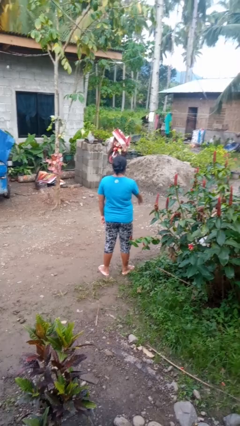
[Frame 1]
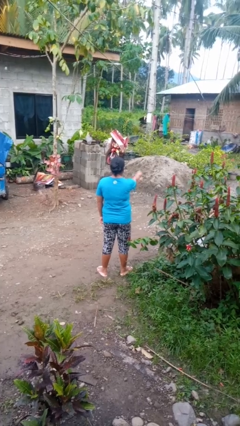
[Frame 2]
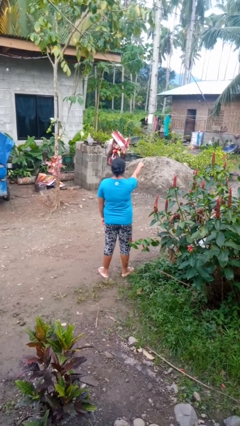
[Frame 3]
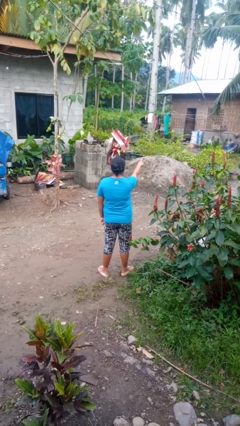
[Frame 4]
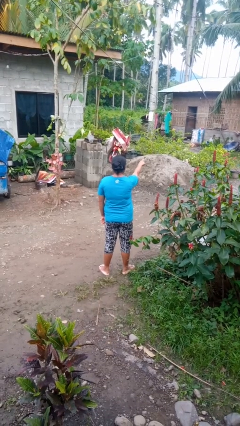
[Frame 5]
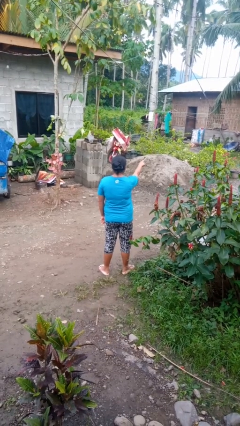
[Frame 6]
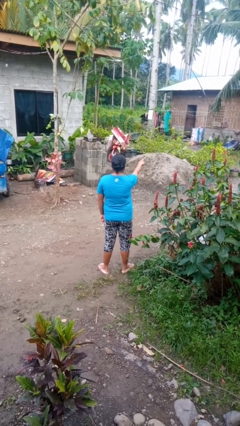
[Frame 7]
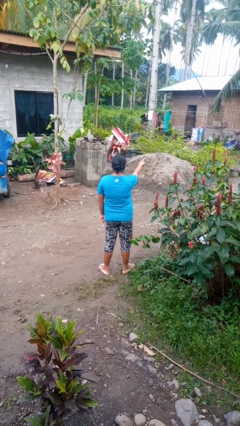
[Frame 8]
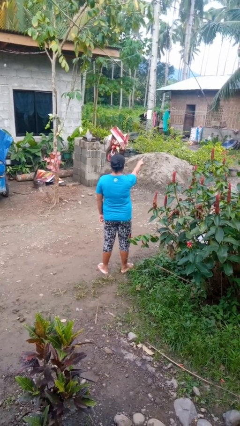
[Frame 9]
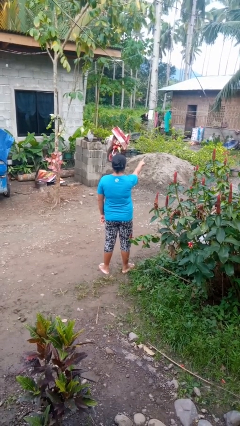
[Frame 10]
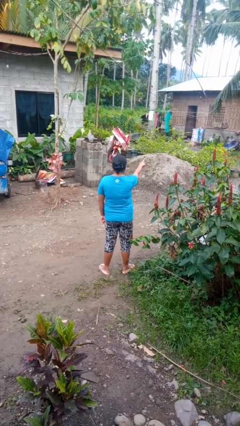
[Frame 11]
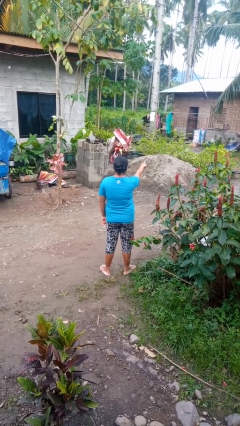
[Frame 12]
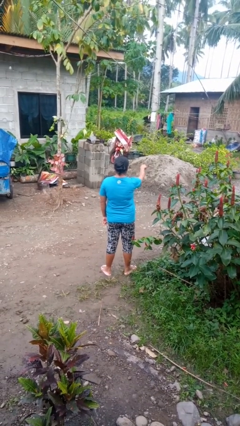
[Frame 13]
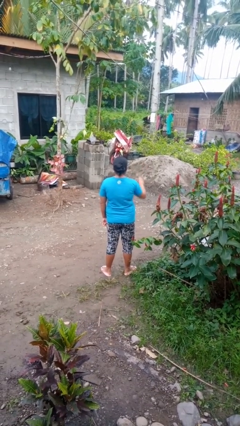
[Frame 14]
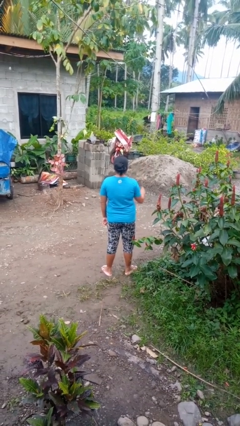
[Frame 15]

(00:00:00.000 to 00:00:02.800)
person points at person

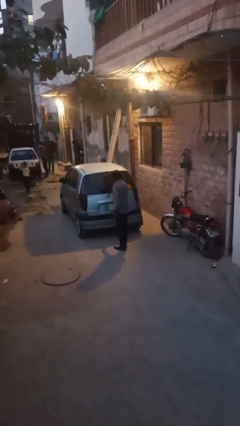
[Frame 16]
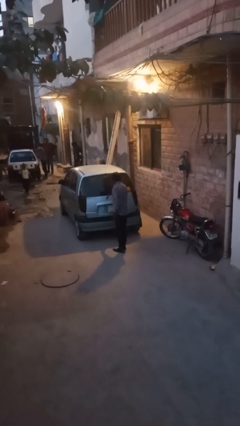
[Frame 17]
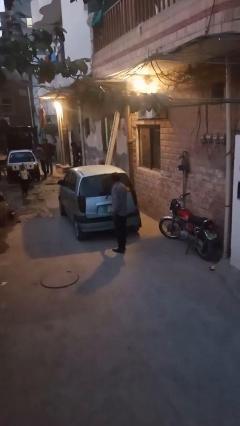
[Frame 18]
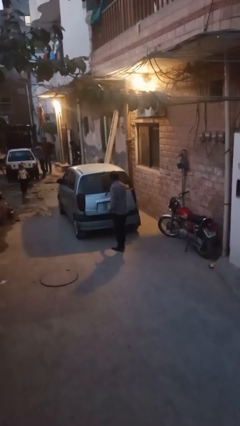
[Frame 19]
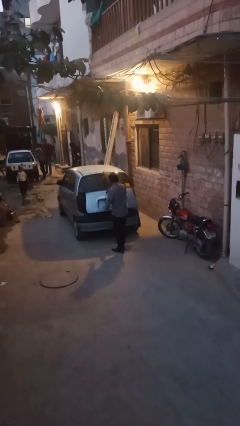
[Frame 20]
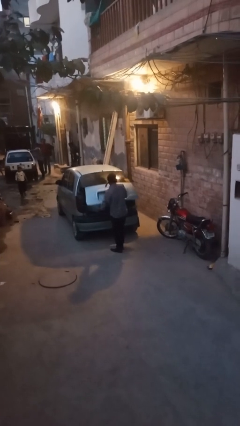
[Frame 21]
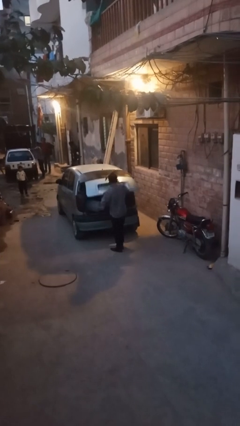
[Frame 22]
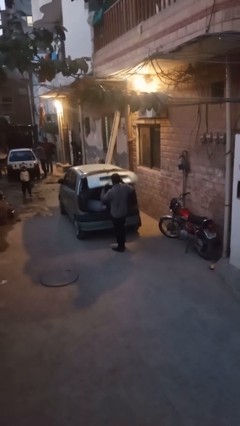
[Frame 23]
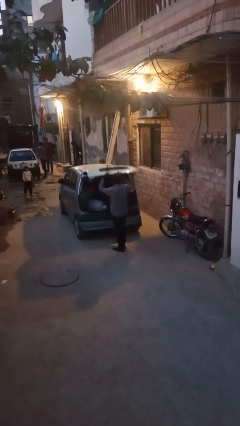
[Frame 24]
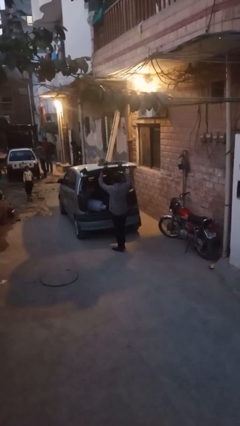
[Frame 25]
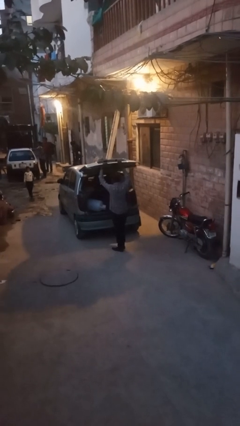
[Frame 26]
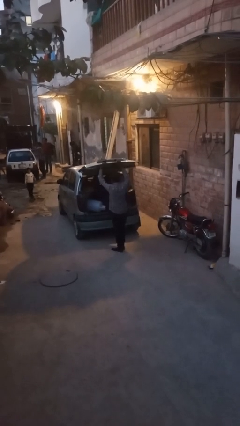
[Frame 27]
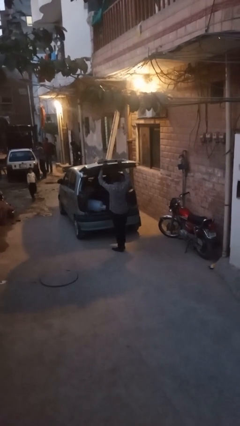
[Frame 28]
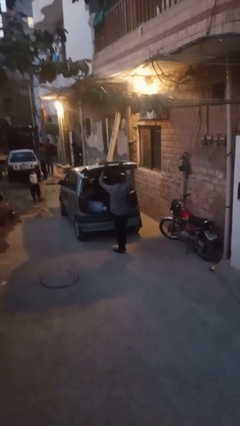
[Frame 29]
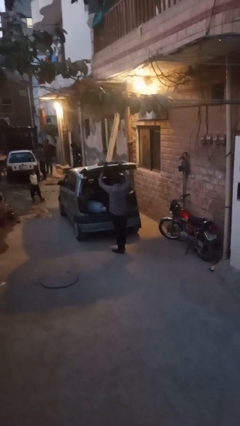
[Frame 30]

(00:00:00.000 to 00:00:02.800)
person opens car trunk

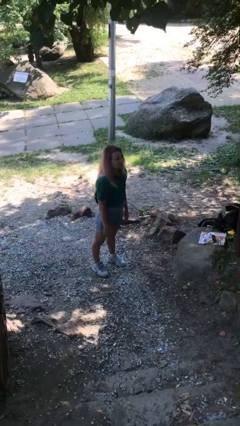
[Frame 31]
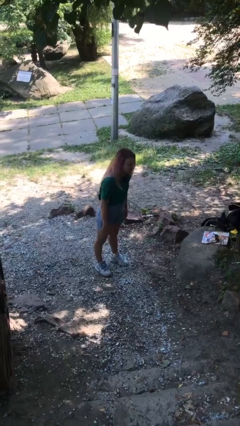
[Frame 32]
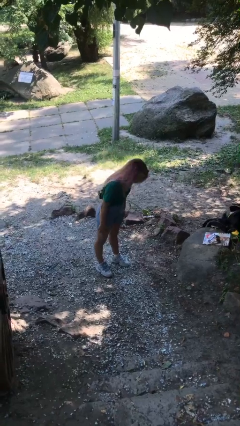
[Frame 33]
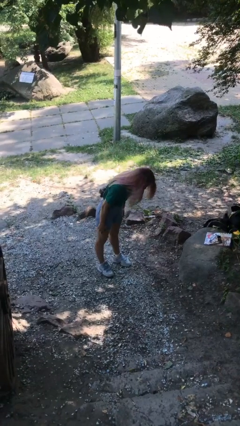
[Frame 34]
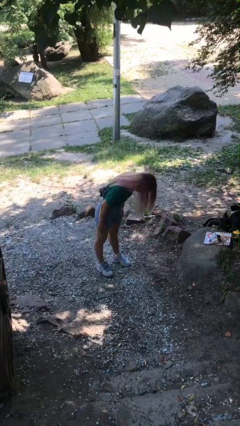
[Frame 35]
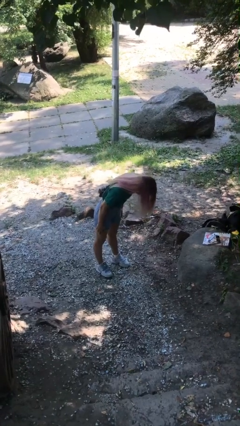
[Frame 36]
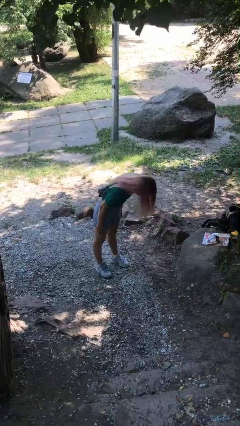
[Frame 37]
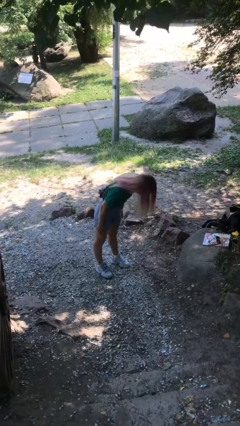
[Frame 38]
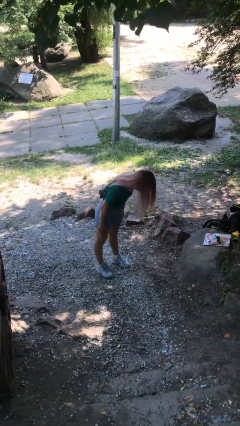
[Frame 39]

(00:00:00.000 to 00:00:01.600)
person bows

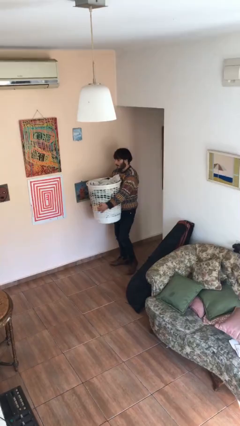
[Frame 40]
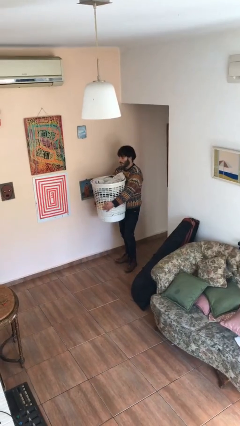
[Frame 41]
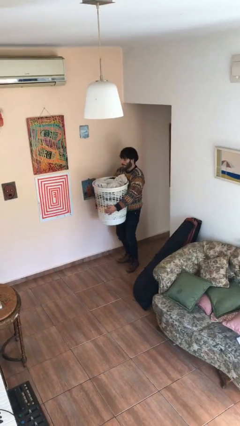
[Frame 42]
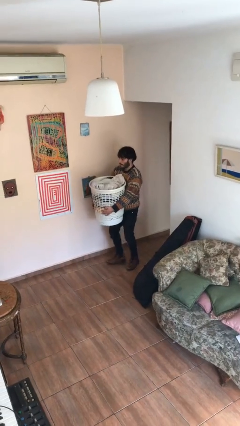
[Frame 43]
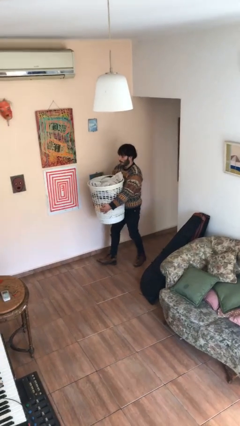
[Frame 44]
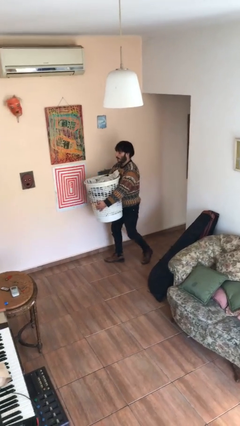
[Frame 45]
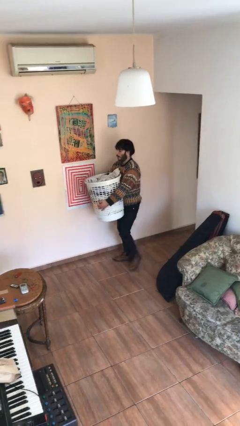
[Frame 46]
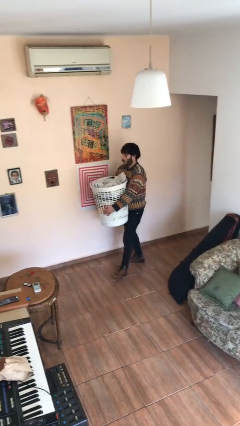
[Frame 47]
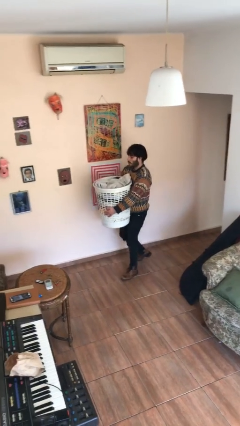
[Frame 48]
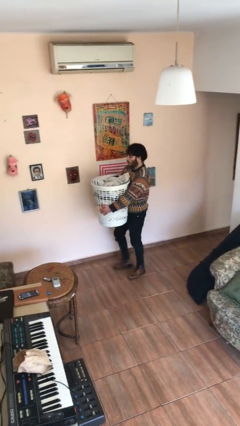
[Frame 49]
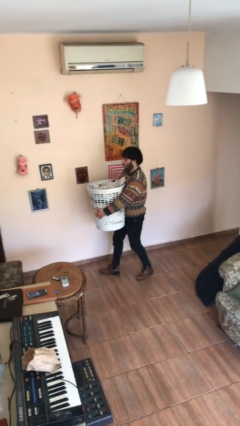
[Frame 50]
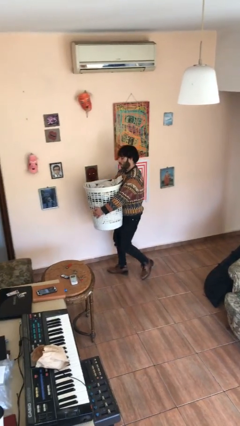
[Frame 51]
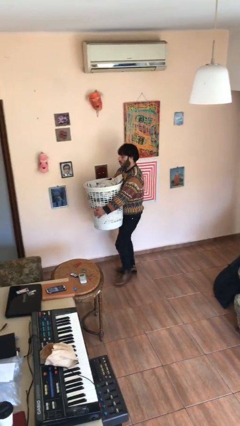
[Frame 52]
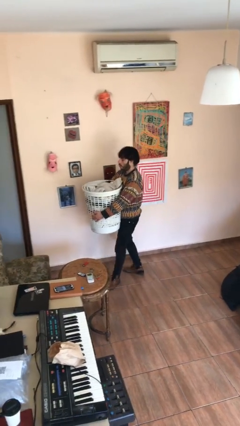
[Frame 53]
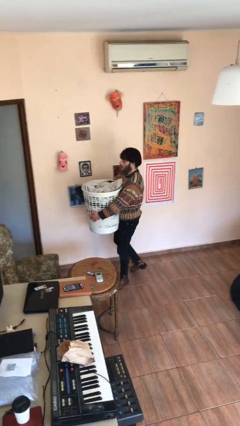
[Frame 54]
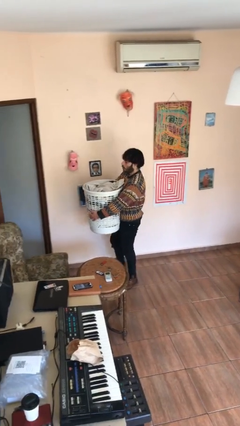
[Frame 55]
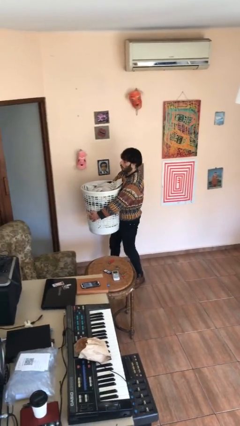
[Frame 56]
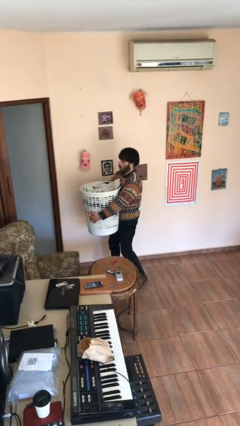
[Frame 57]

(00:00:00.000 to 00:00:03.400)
person carries laundry basket

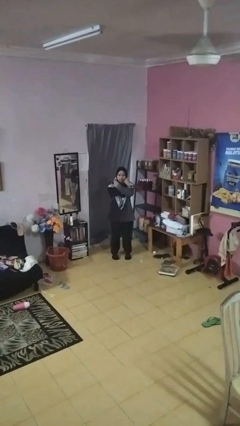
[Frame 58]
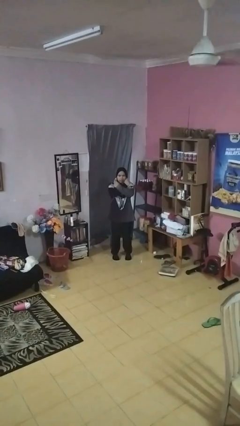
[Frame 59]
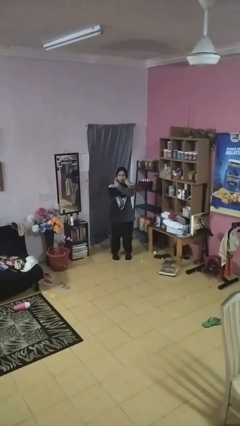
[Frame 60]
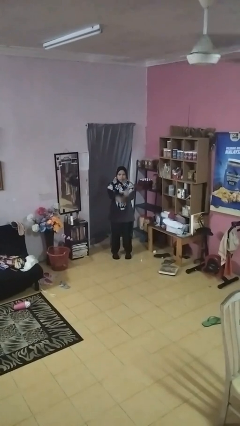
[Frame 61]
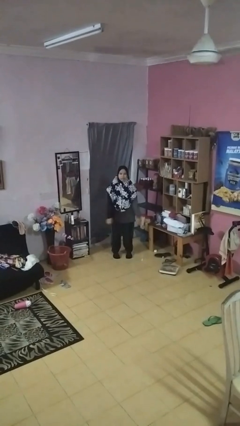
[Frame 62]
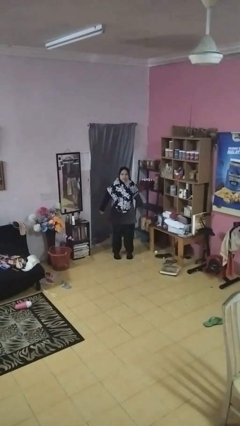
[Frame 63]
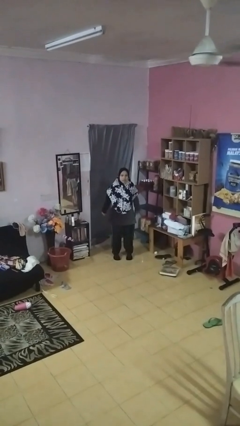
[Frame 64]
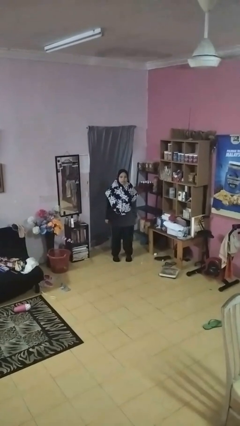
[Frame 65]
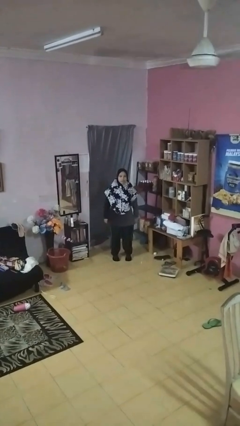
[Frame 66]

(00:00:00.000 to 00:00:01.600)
person crosses arms

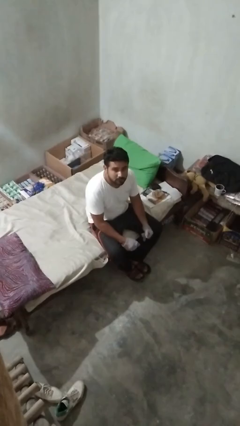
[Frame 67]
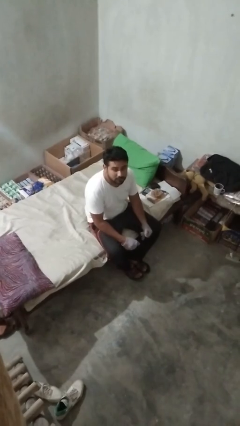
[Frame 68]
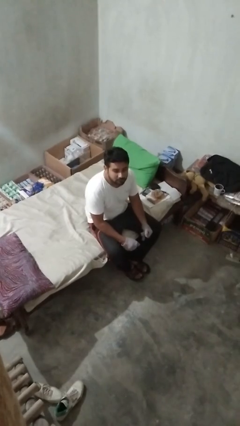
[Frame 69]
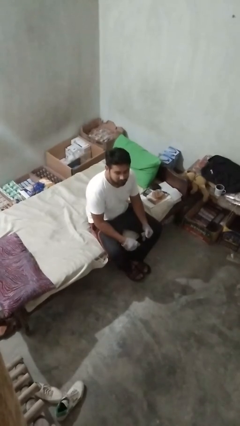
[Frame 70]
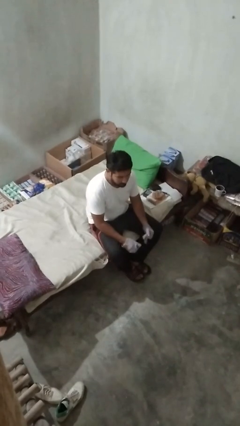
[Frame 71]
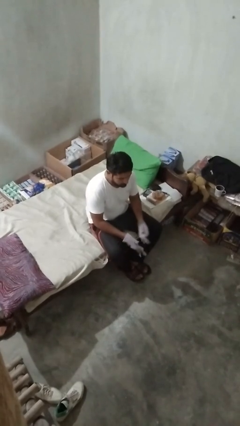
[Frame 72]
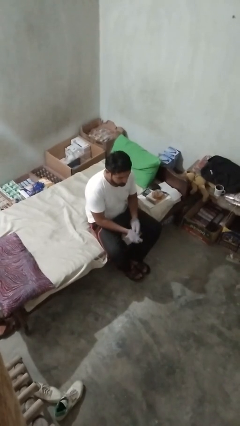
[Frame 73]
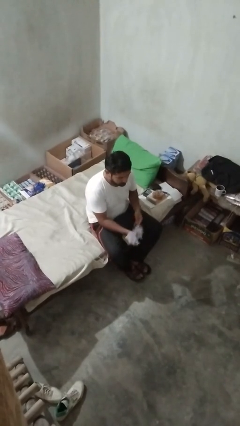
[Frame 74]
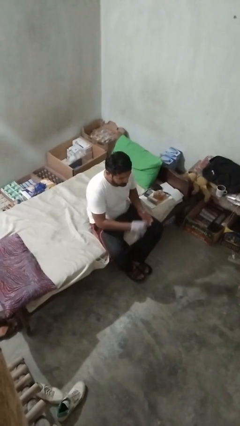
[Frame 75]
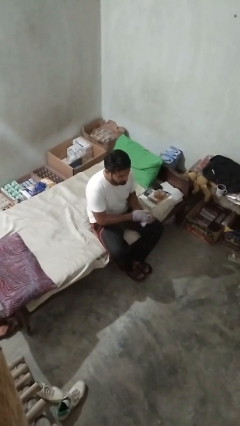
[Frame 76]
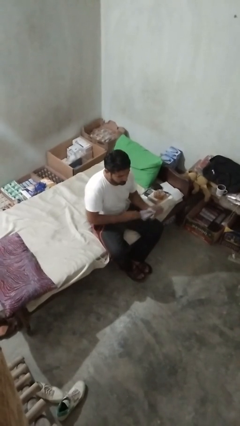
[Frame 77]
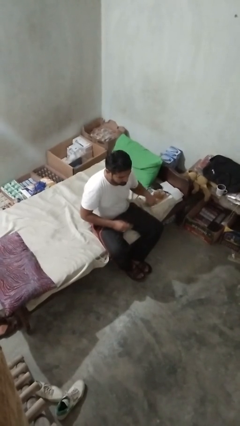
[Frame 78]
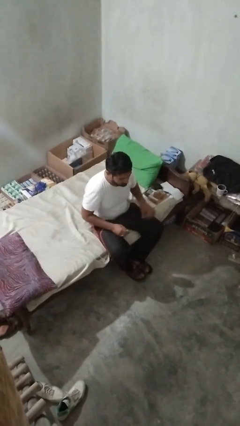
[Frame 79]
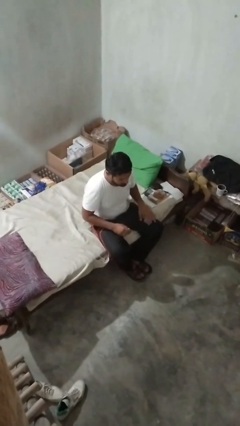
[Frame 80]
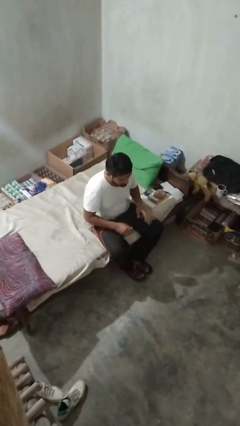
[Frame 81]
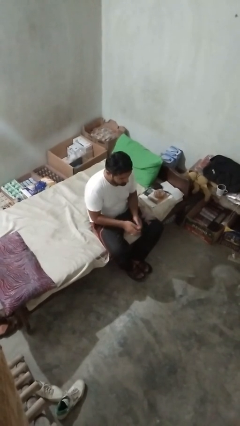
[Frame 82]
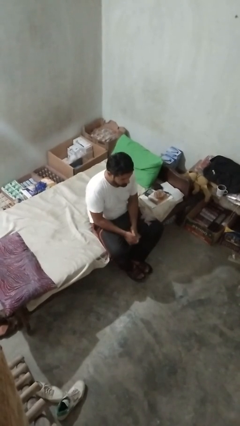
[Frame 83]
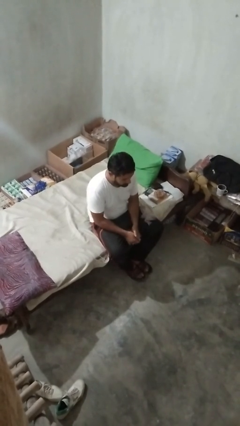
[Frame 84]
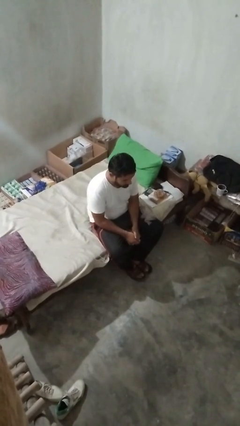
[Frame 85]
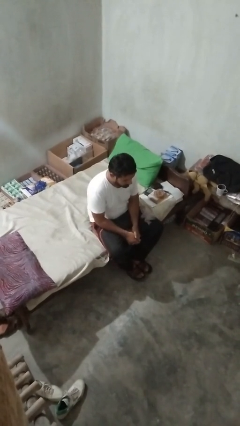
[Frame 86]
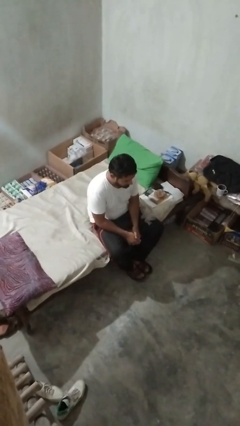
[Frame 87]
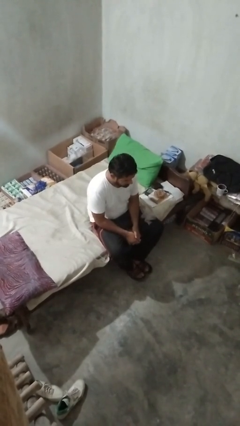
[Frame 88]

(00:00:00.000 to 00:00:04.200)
person takes off gloves

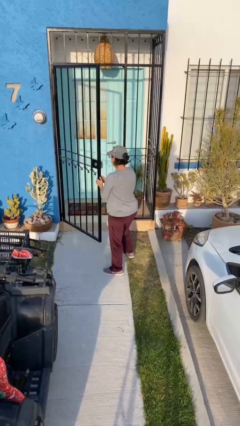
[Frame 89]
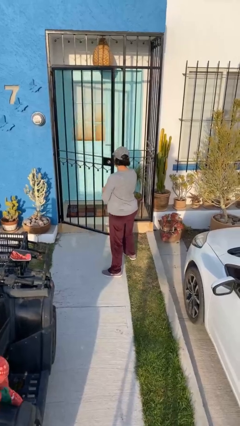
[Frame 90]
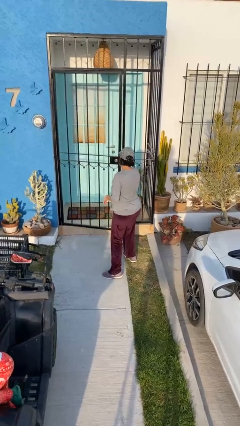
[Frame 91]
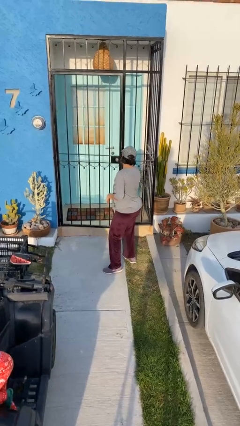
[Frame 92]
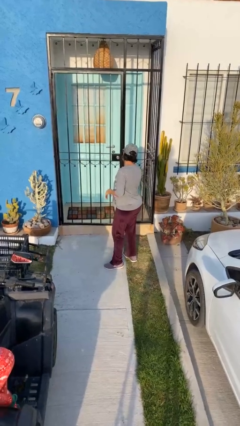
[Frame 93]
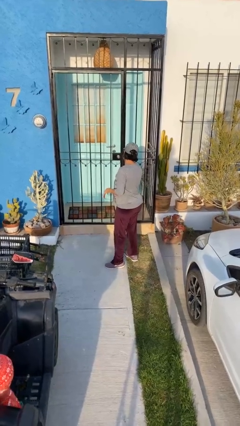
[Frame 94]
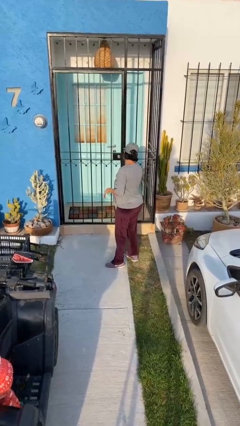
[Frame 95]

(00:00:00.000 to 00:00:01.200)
person closes facility door
